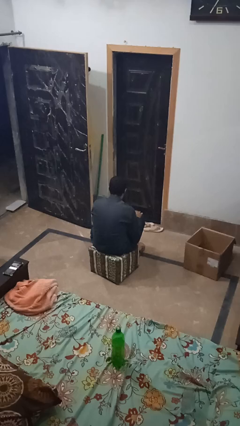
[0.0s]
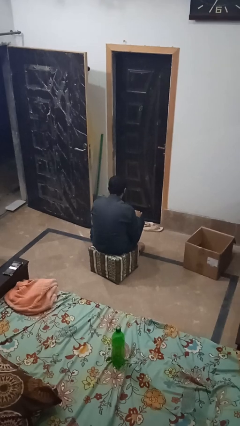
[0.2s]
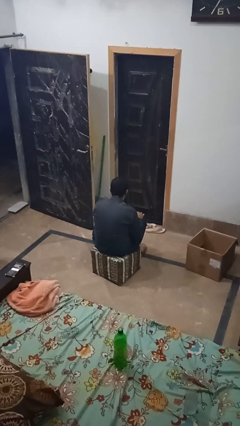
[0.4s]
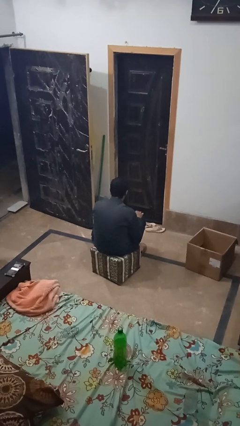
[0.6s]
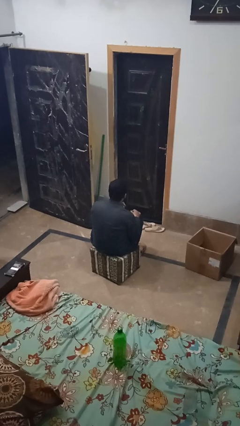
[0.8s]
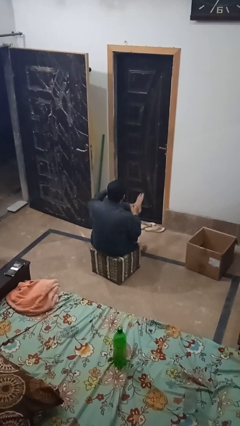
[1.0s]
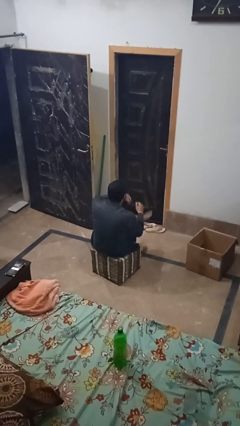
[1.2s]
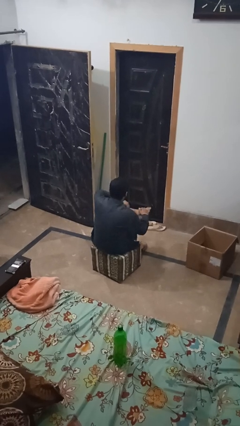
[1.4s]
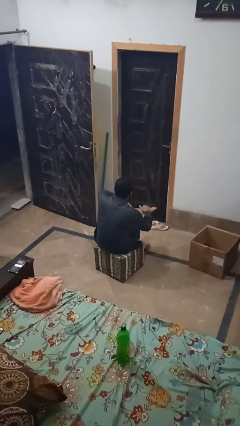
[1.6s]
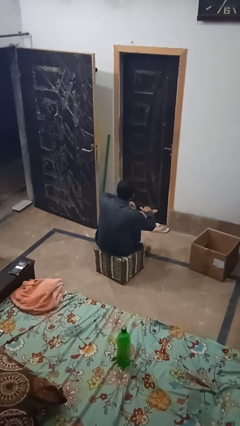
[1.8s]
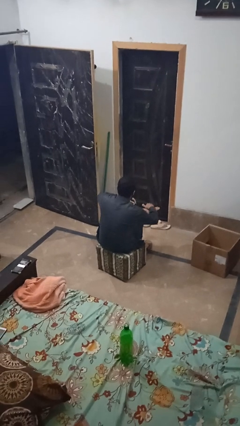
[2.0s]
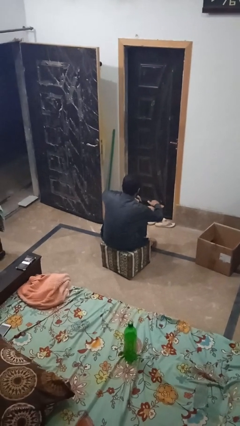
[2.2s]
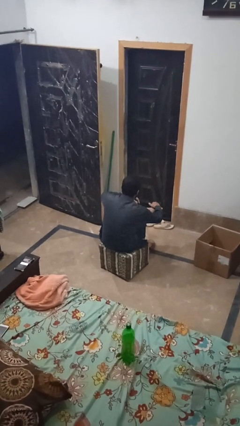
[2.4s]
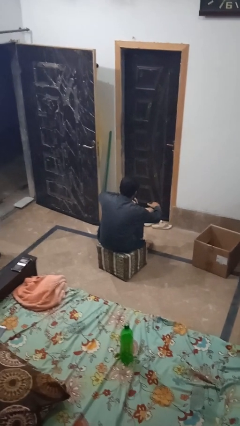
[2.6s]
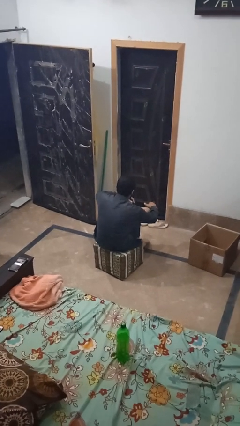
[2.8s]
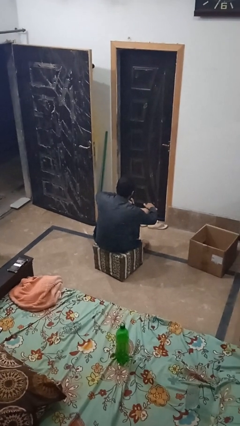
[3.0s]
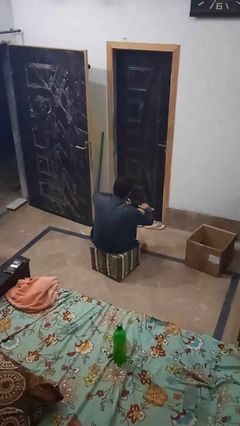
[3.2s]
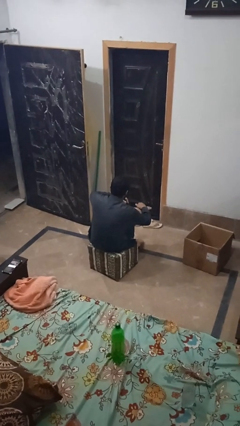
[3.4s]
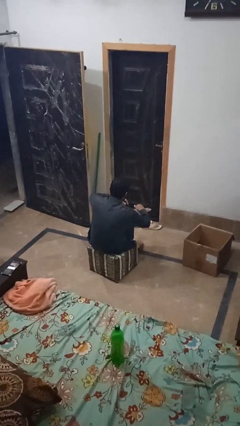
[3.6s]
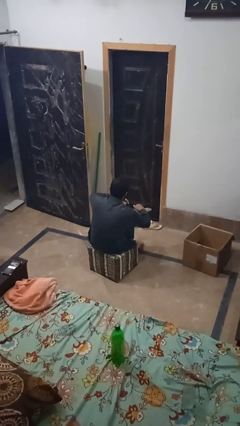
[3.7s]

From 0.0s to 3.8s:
person rubs foot

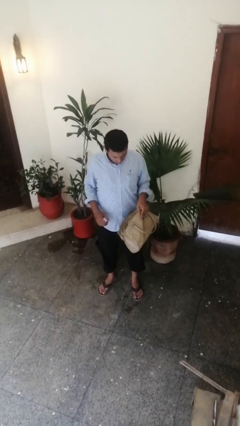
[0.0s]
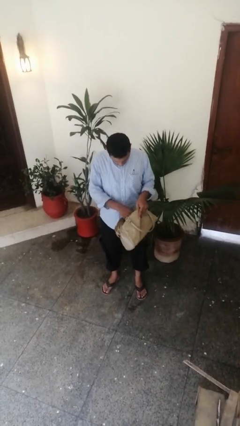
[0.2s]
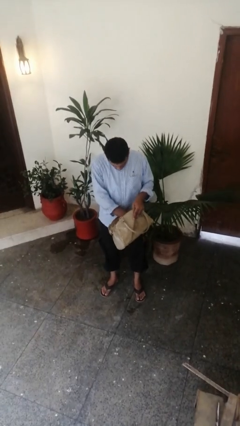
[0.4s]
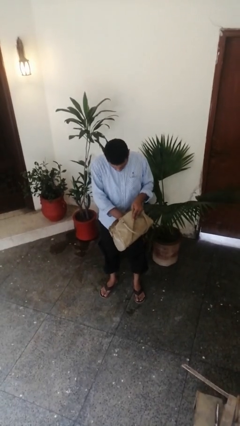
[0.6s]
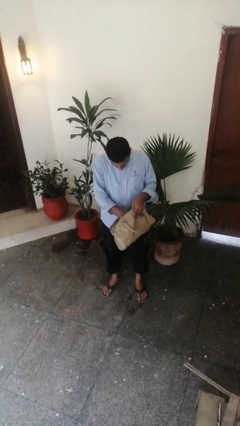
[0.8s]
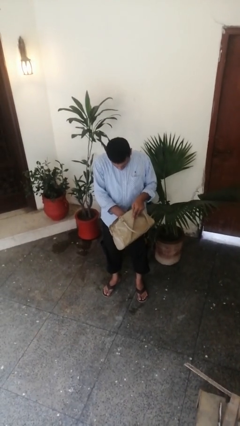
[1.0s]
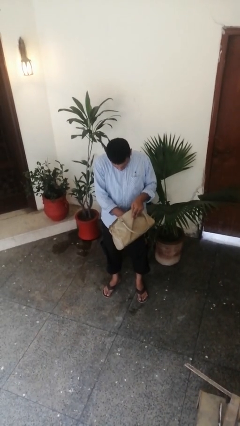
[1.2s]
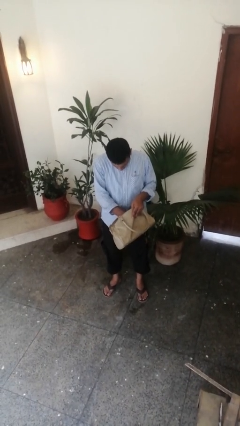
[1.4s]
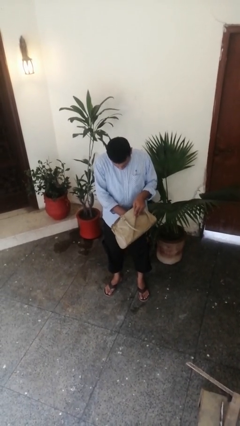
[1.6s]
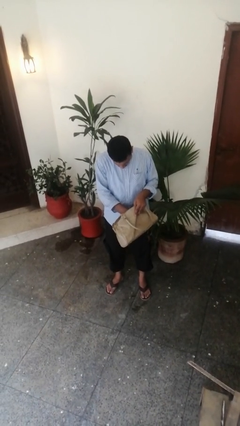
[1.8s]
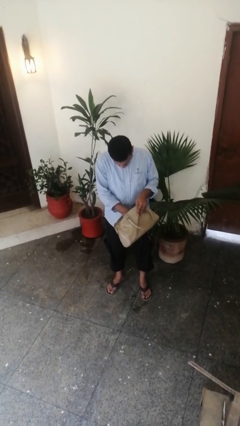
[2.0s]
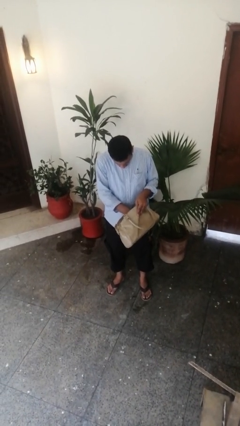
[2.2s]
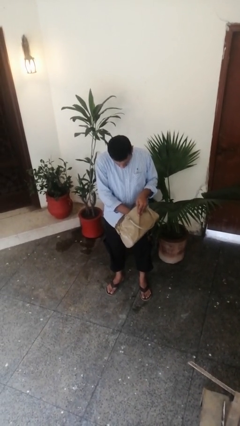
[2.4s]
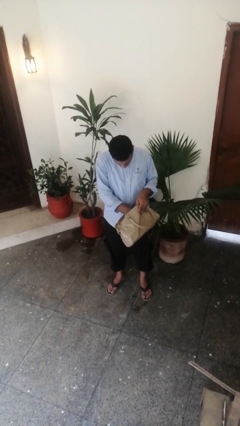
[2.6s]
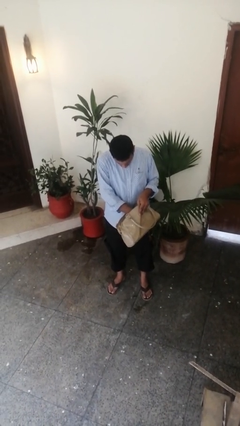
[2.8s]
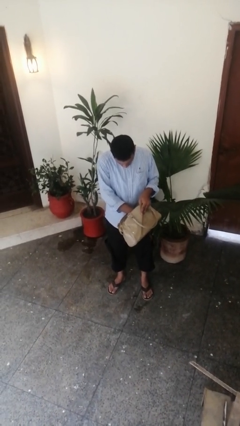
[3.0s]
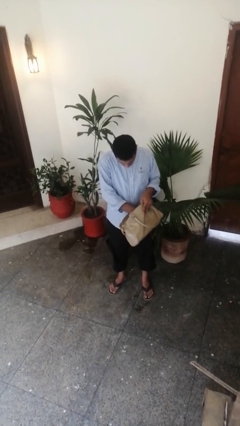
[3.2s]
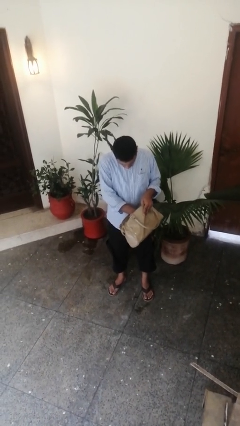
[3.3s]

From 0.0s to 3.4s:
person searches in purse

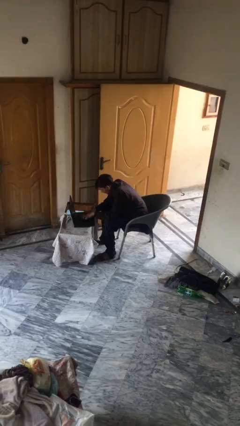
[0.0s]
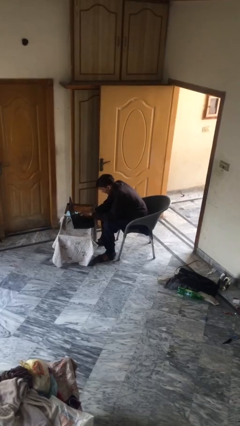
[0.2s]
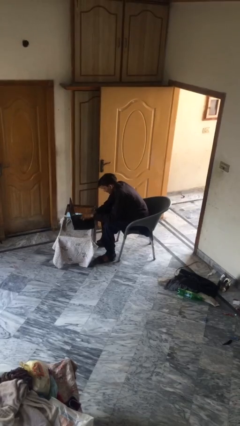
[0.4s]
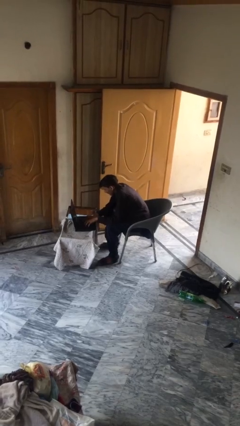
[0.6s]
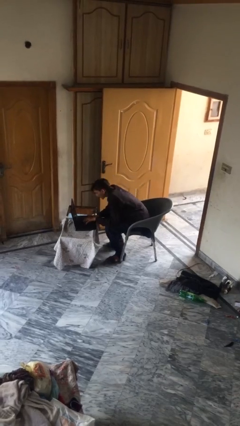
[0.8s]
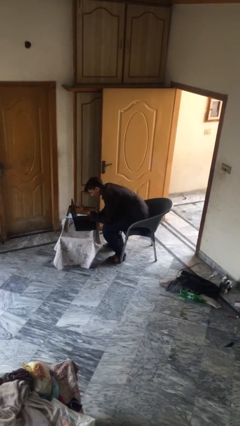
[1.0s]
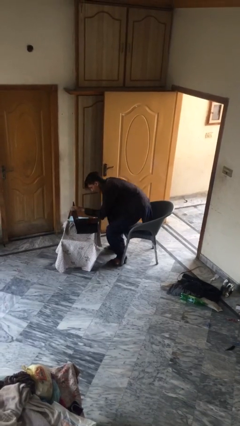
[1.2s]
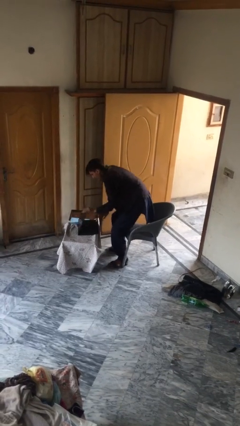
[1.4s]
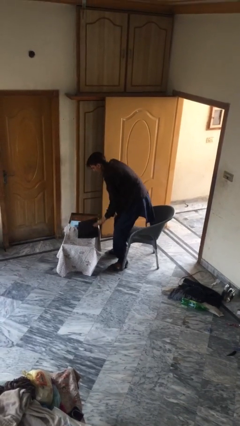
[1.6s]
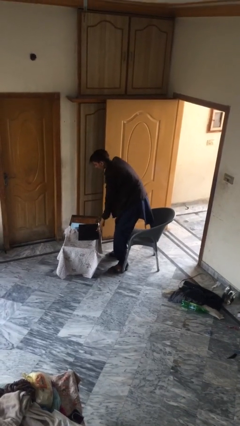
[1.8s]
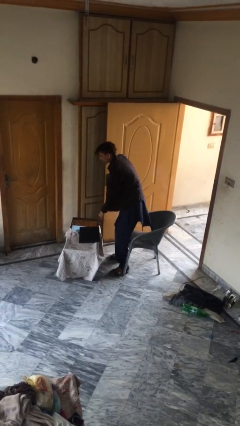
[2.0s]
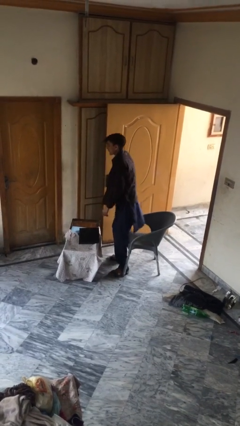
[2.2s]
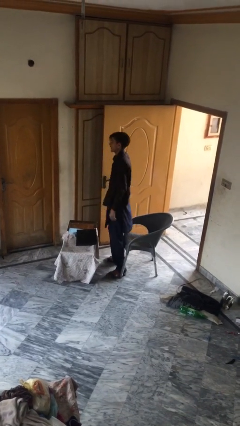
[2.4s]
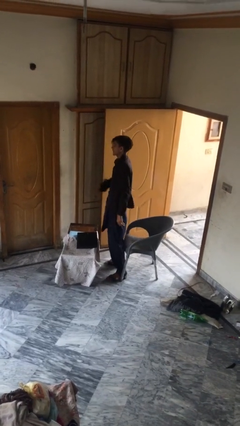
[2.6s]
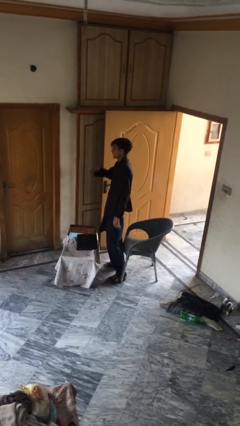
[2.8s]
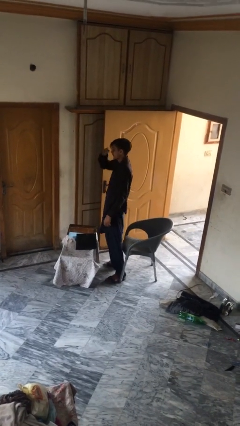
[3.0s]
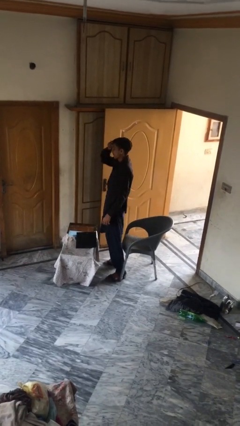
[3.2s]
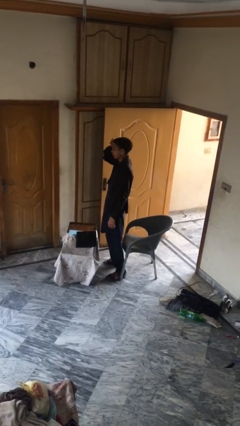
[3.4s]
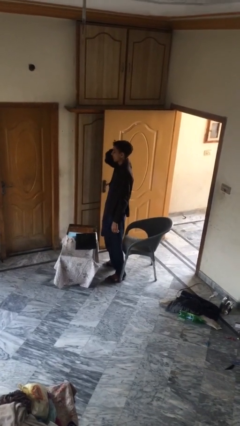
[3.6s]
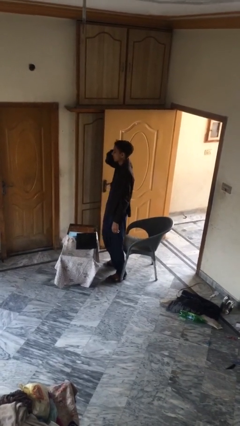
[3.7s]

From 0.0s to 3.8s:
person stands up

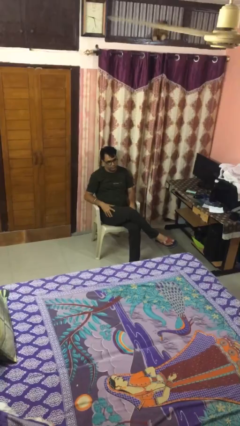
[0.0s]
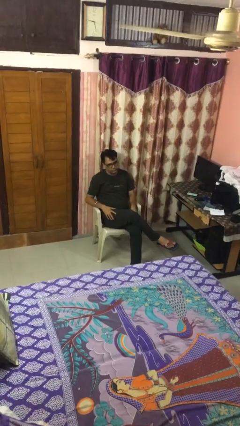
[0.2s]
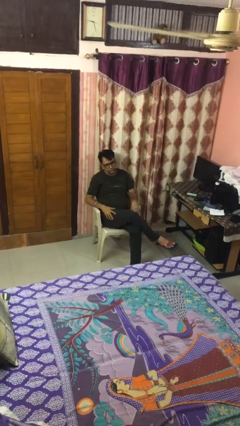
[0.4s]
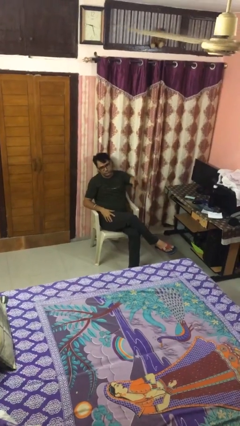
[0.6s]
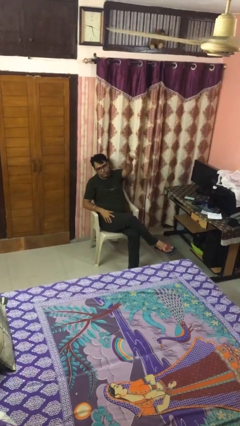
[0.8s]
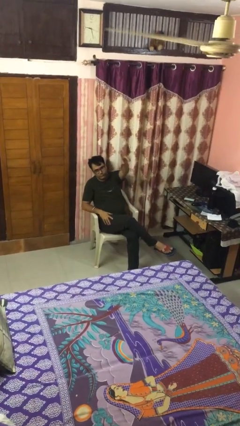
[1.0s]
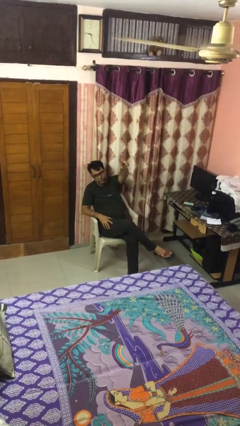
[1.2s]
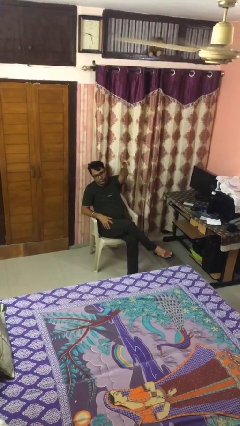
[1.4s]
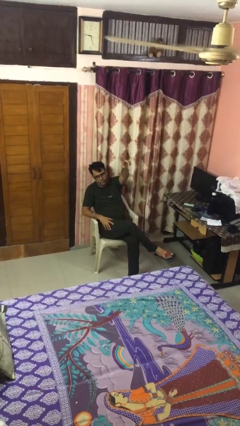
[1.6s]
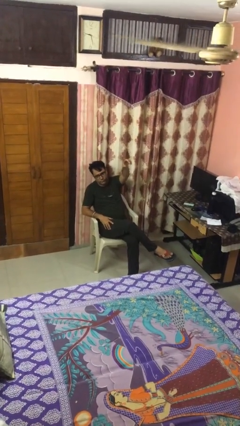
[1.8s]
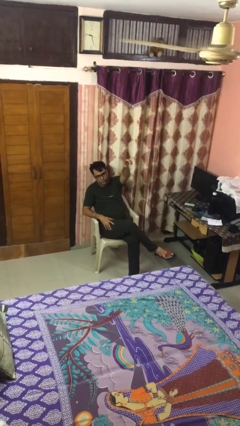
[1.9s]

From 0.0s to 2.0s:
person gestures raise hand

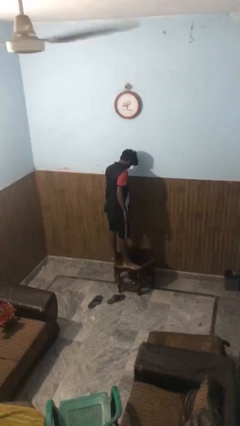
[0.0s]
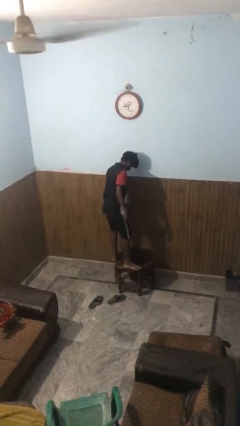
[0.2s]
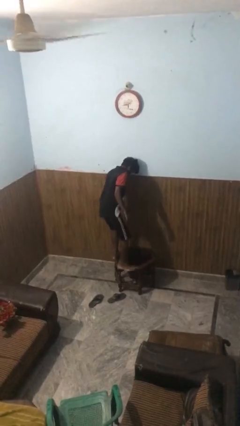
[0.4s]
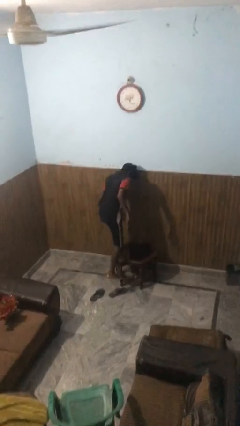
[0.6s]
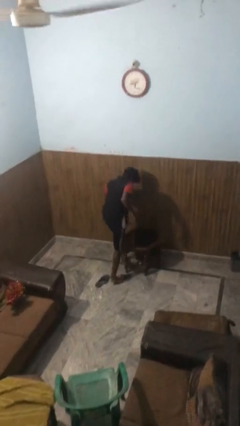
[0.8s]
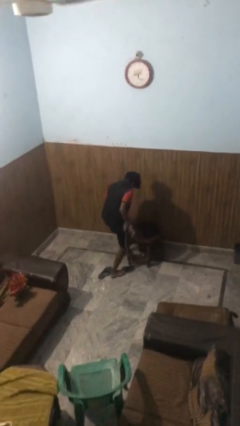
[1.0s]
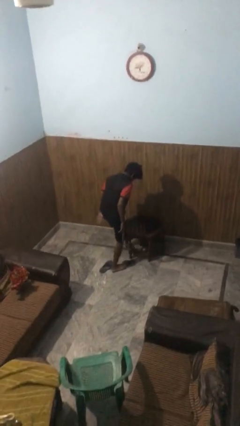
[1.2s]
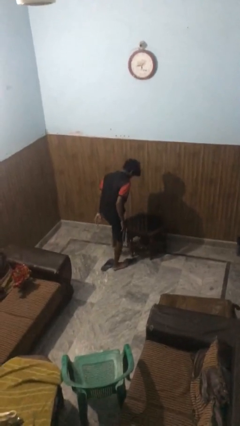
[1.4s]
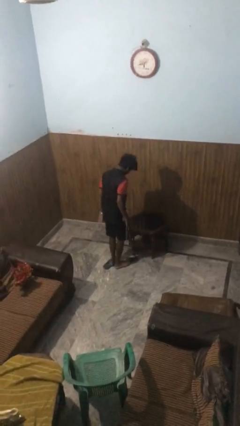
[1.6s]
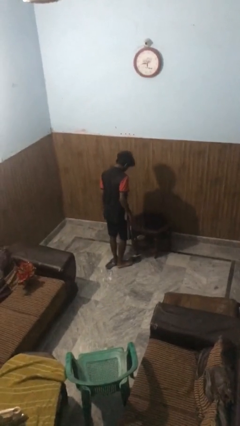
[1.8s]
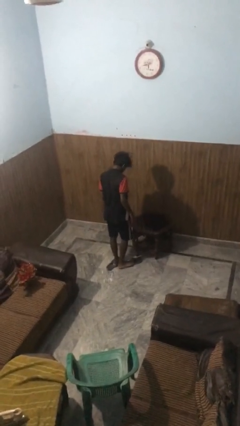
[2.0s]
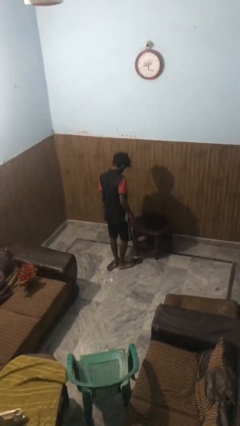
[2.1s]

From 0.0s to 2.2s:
person climbs off table

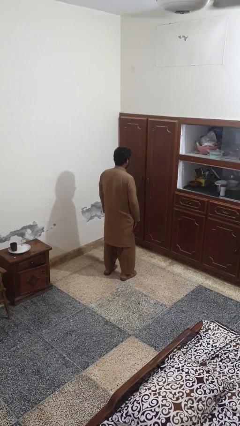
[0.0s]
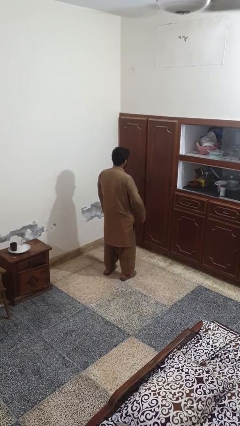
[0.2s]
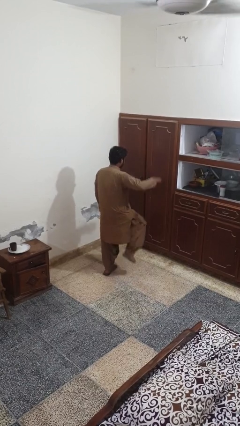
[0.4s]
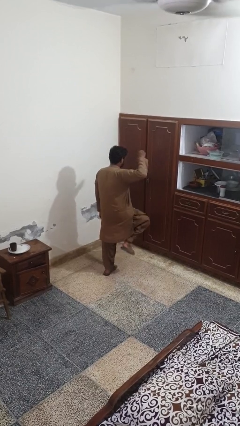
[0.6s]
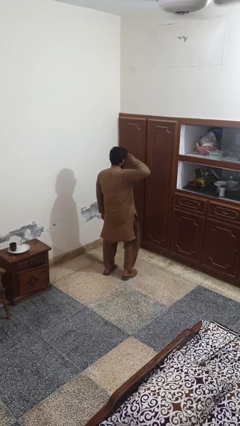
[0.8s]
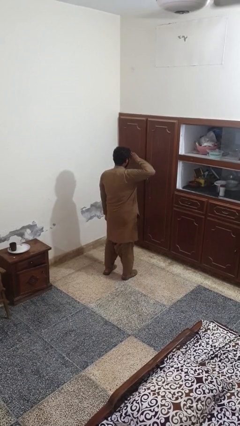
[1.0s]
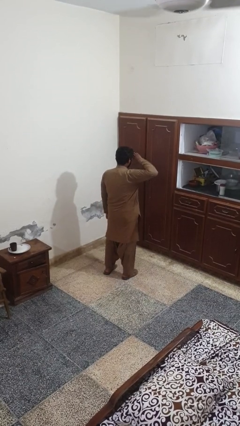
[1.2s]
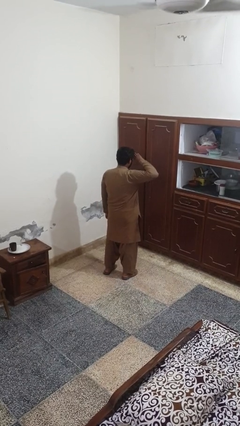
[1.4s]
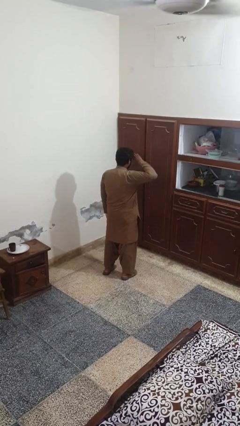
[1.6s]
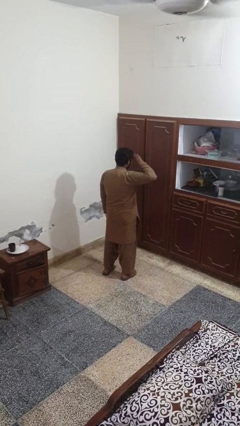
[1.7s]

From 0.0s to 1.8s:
person salutes

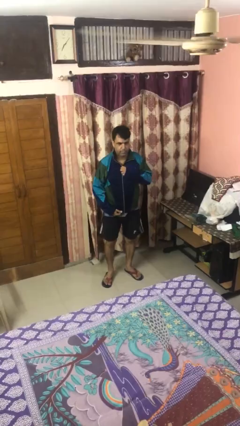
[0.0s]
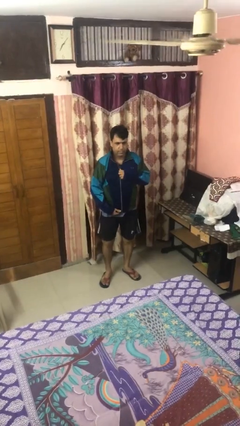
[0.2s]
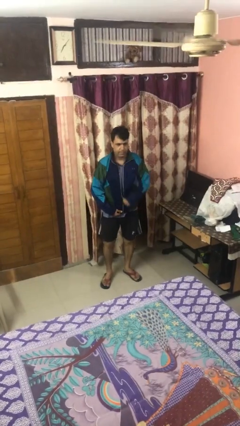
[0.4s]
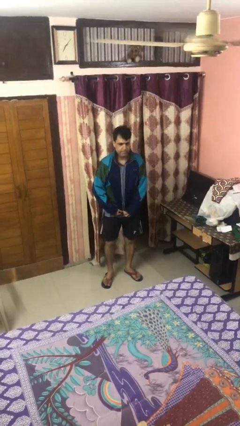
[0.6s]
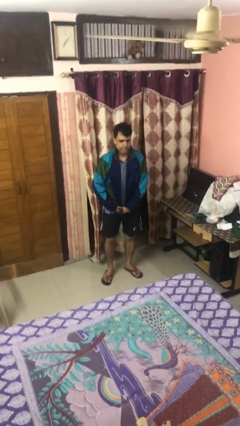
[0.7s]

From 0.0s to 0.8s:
person unzips jacket
